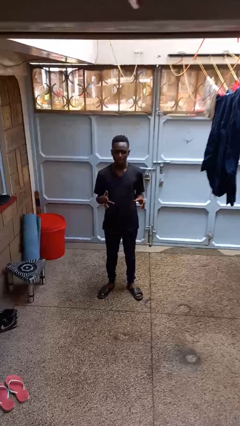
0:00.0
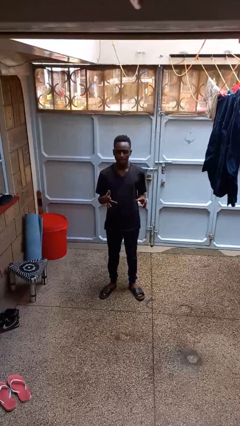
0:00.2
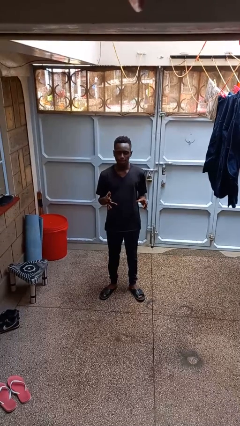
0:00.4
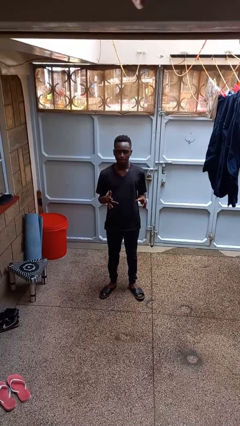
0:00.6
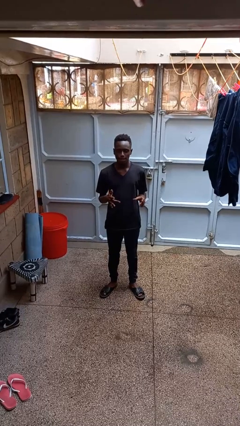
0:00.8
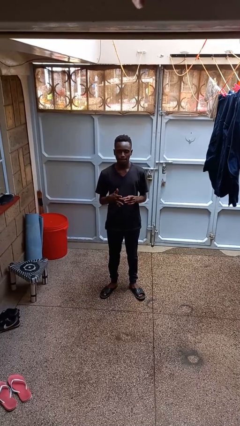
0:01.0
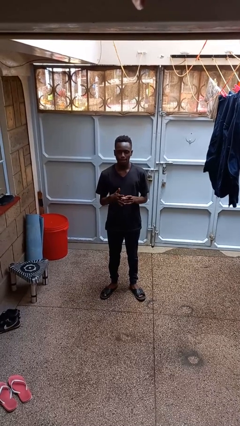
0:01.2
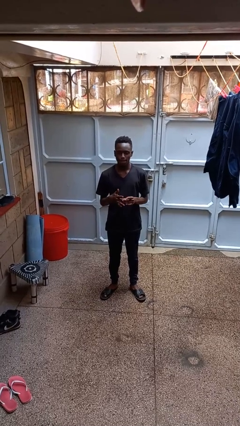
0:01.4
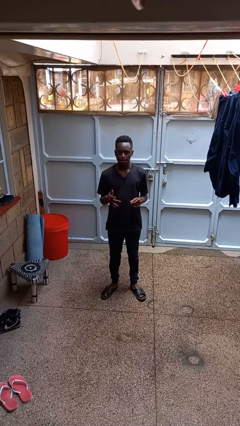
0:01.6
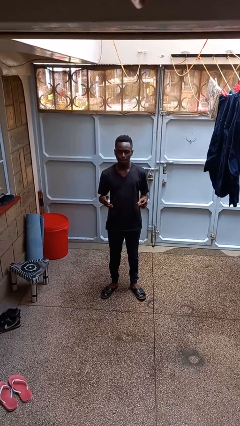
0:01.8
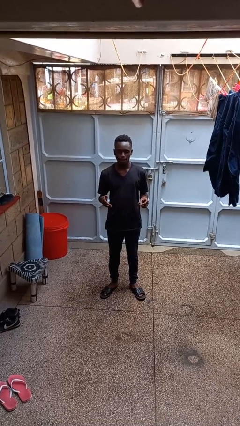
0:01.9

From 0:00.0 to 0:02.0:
person takes off ring

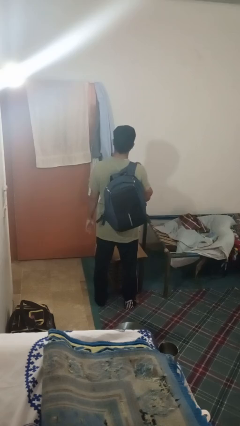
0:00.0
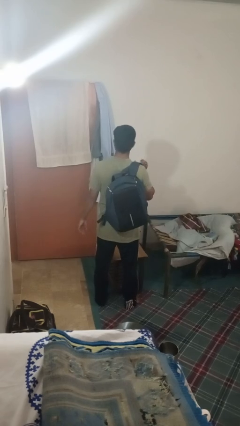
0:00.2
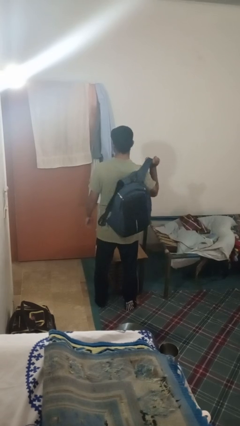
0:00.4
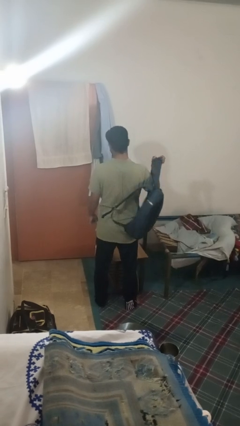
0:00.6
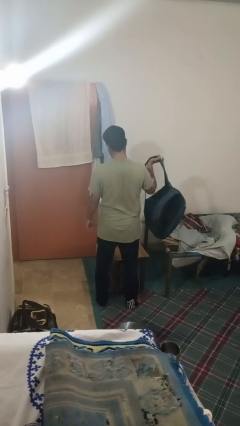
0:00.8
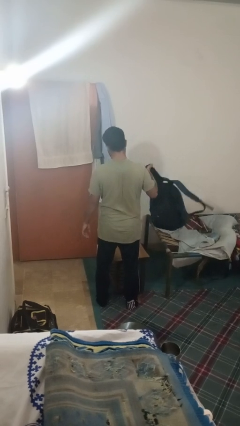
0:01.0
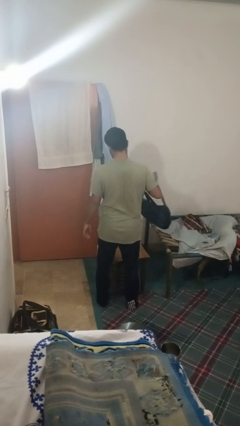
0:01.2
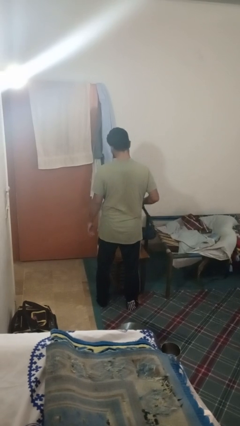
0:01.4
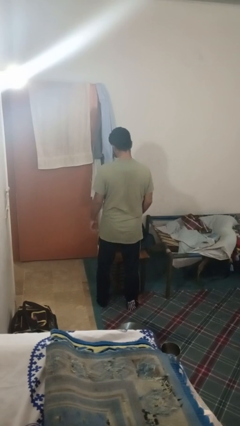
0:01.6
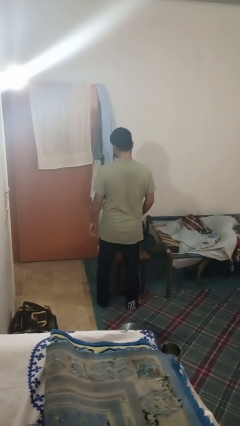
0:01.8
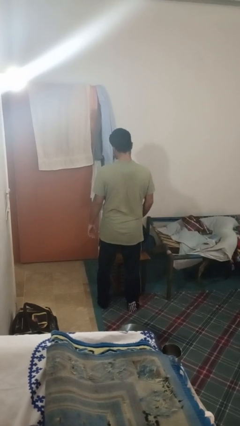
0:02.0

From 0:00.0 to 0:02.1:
person takes off backpack

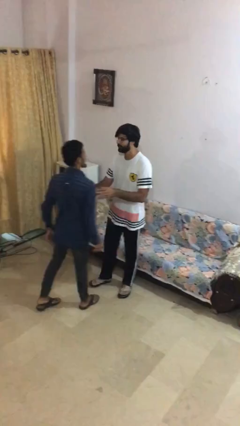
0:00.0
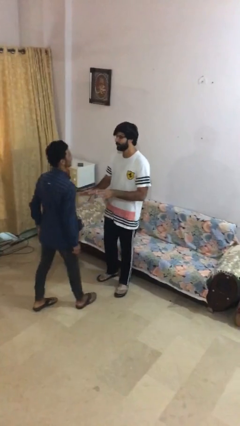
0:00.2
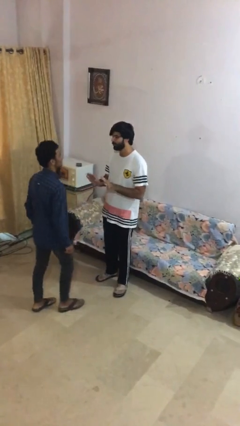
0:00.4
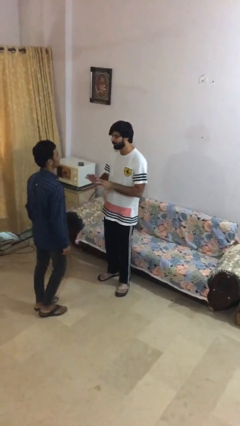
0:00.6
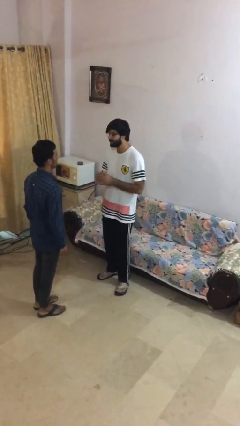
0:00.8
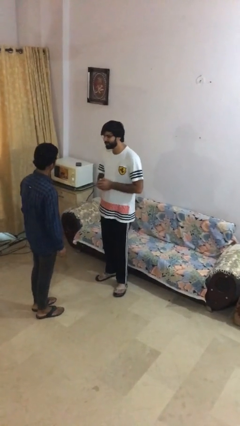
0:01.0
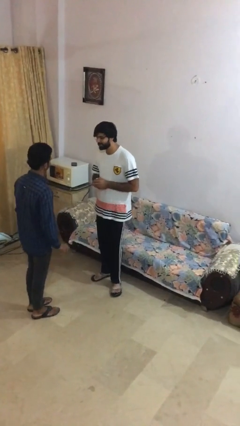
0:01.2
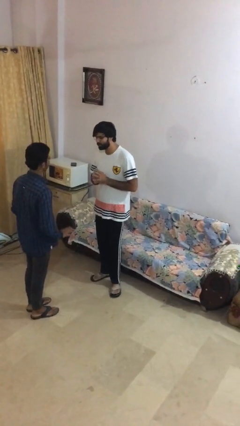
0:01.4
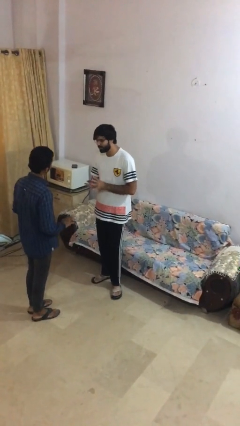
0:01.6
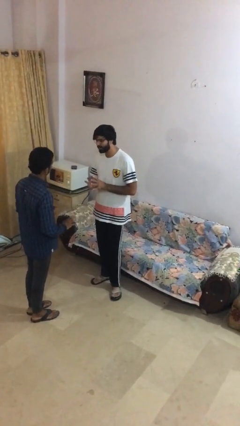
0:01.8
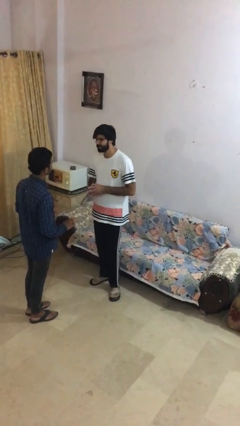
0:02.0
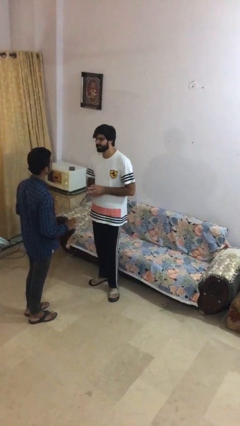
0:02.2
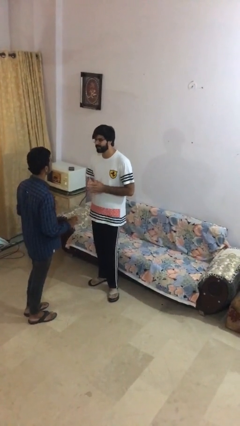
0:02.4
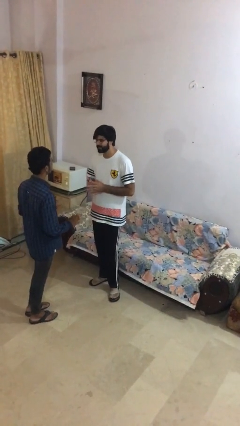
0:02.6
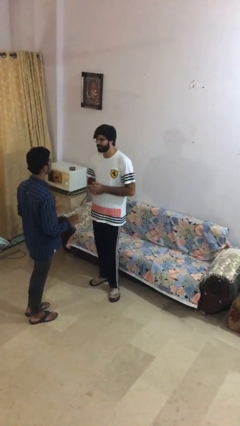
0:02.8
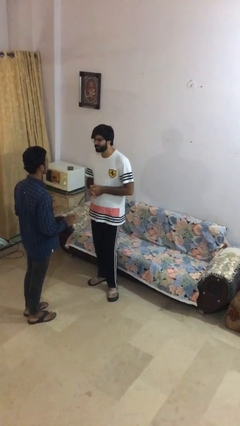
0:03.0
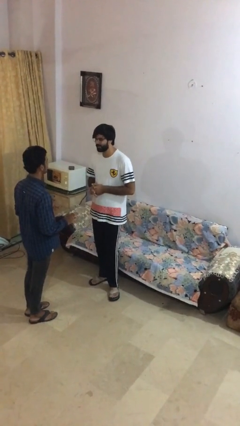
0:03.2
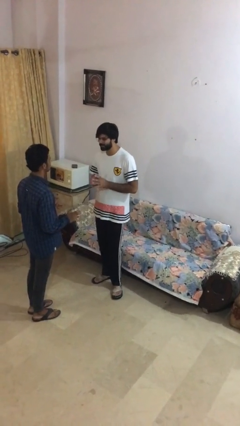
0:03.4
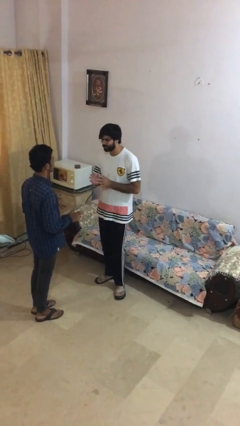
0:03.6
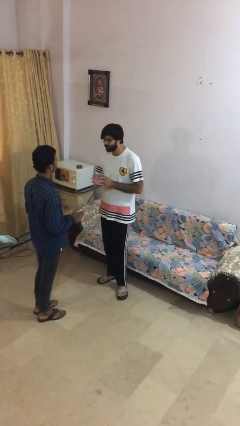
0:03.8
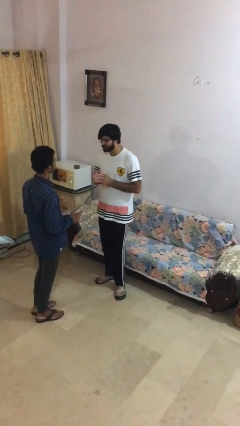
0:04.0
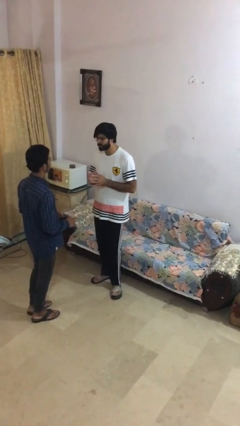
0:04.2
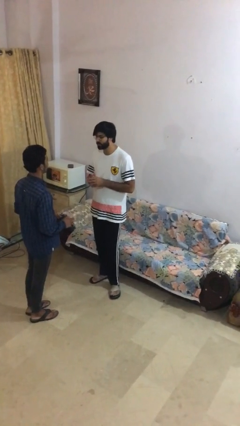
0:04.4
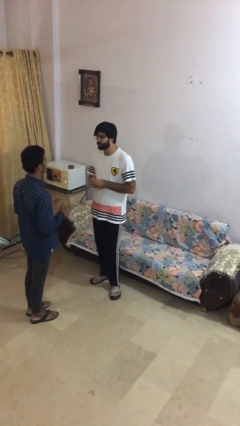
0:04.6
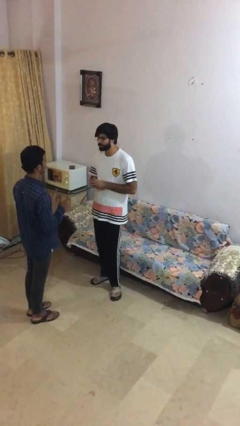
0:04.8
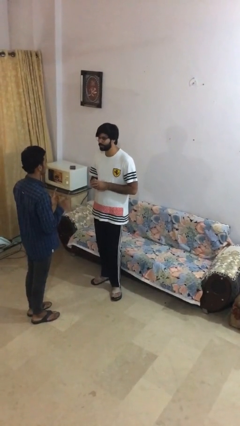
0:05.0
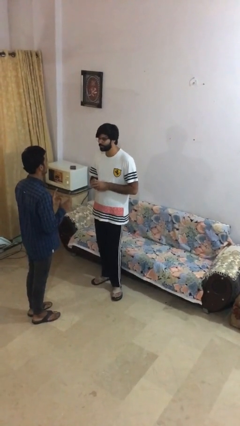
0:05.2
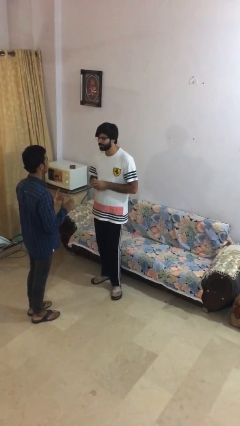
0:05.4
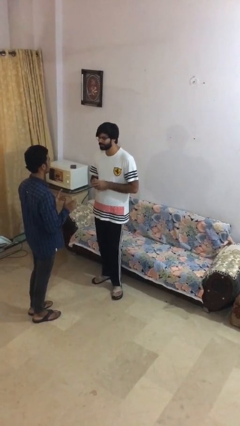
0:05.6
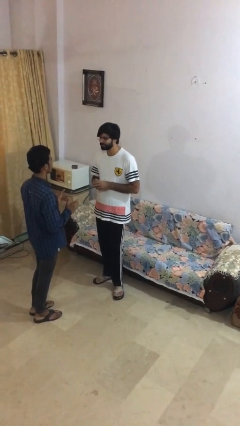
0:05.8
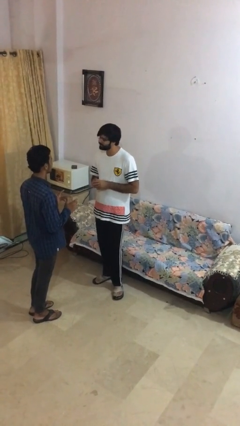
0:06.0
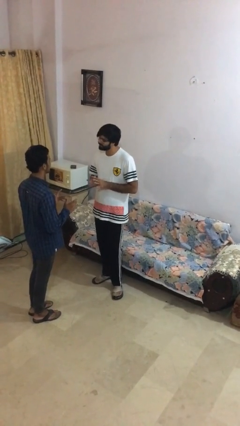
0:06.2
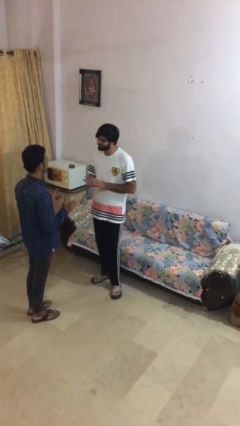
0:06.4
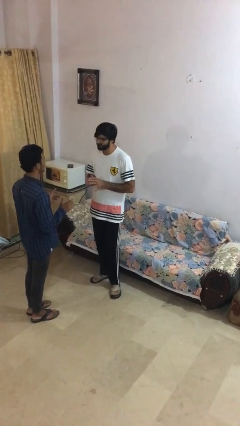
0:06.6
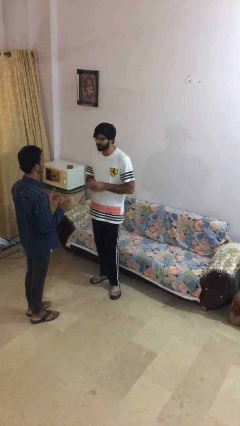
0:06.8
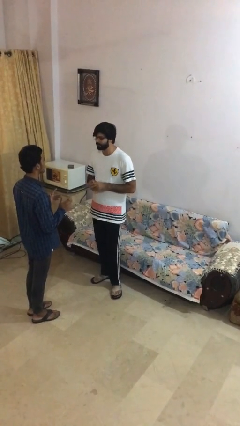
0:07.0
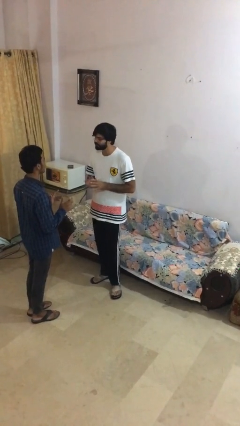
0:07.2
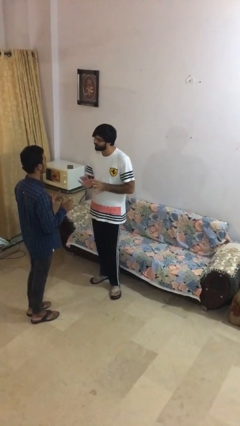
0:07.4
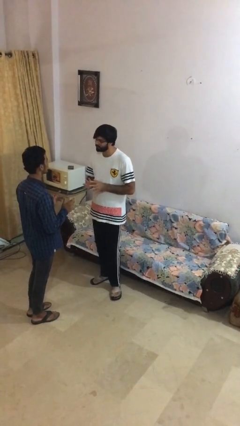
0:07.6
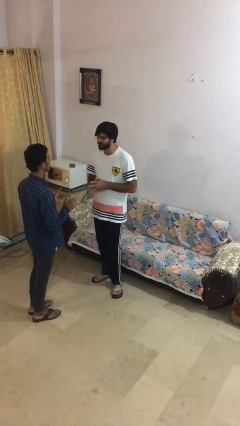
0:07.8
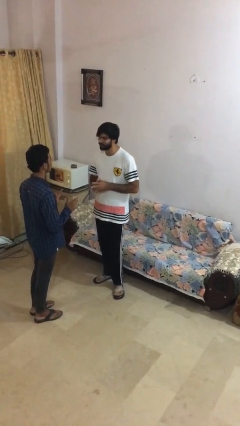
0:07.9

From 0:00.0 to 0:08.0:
person talks to person

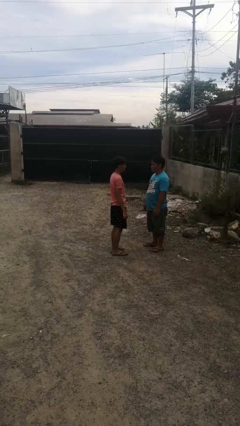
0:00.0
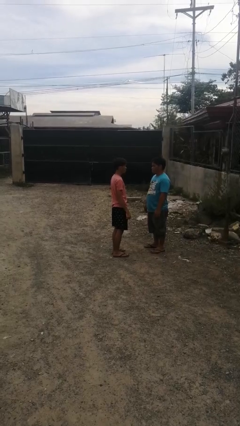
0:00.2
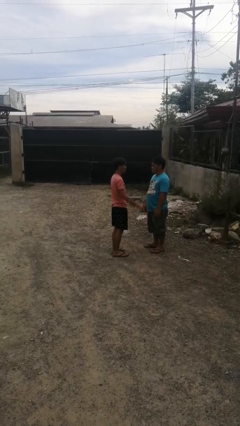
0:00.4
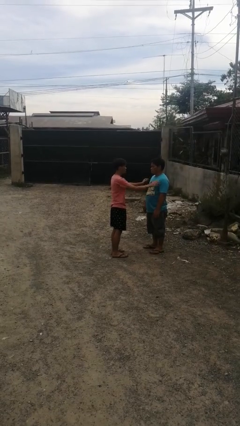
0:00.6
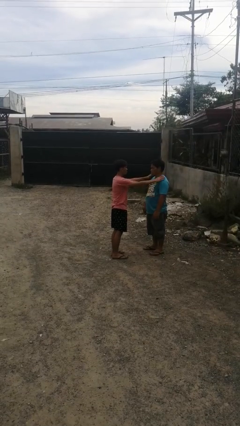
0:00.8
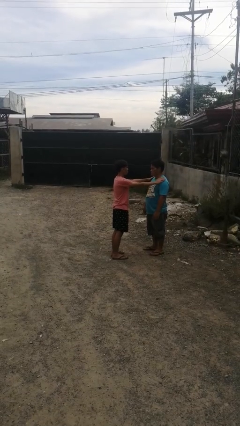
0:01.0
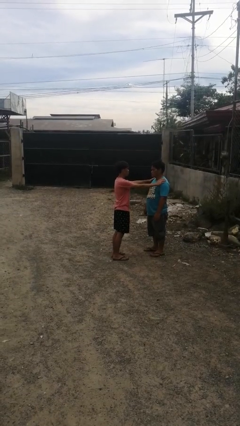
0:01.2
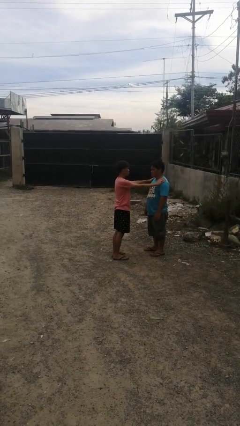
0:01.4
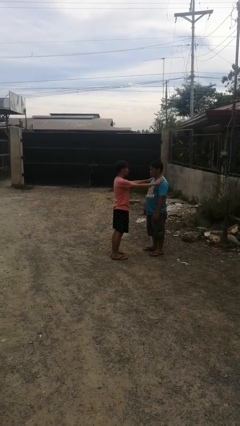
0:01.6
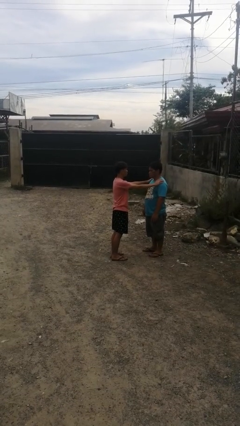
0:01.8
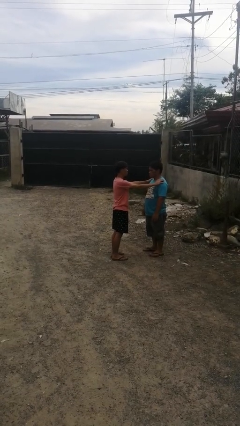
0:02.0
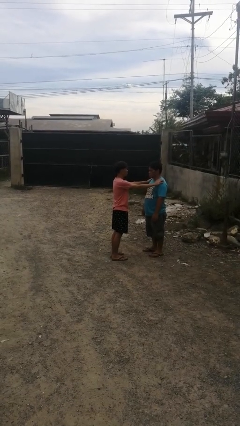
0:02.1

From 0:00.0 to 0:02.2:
person grabs person by shoulder

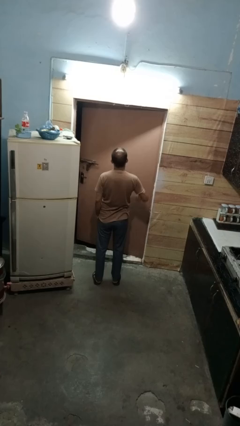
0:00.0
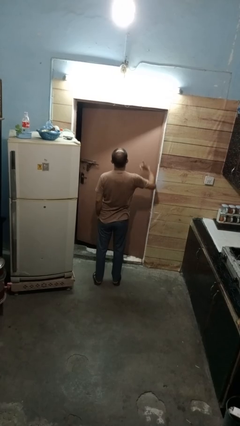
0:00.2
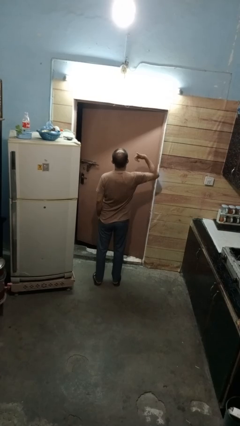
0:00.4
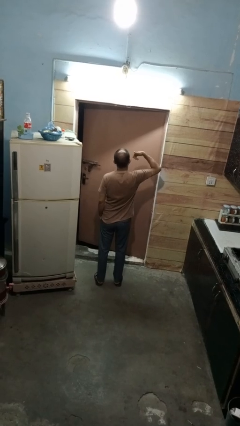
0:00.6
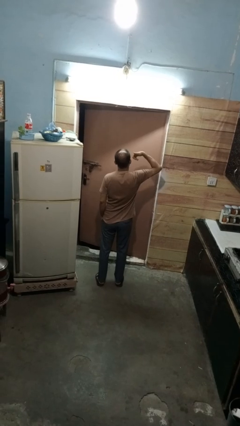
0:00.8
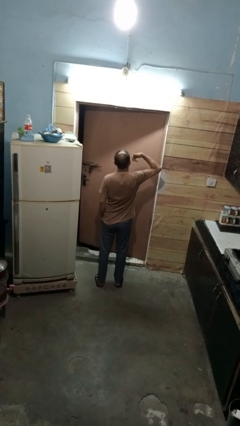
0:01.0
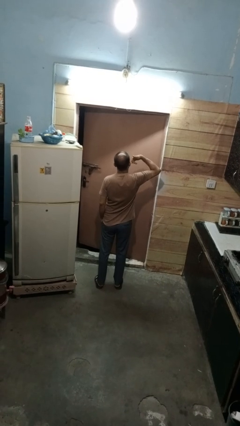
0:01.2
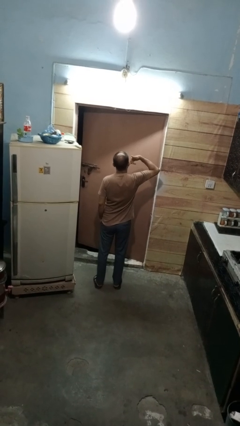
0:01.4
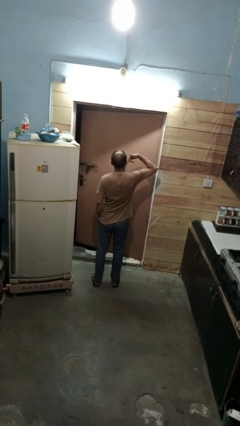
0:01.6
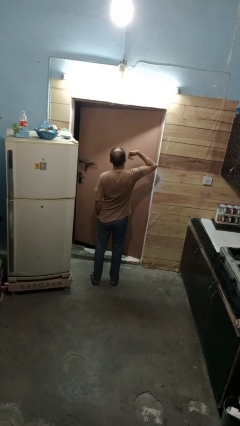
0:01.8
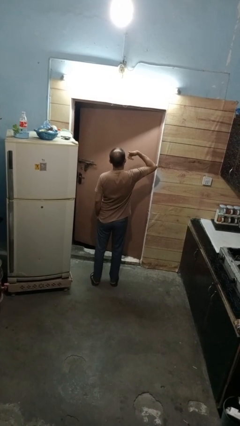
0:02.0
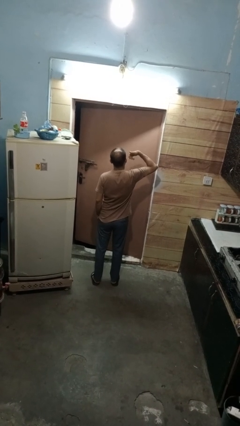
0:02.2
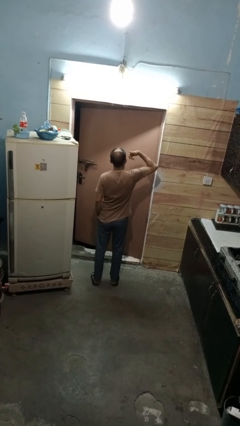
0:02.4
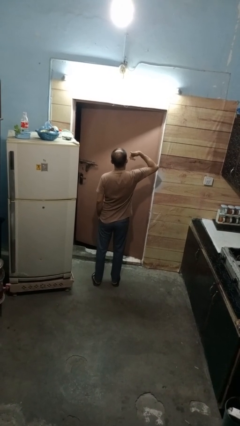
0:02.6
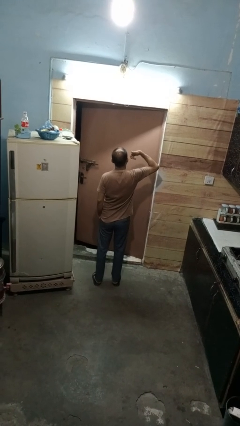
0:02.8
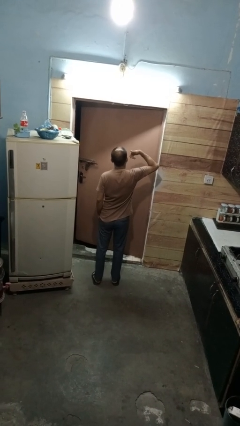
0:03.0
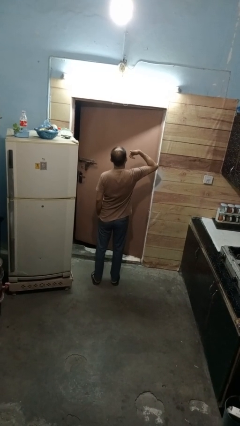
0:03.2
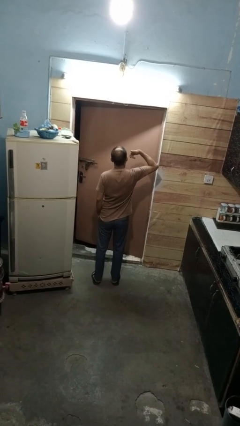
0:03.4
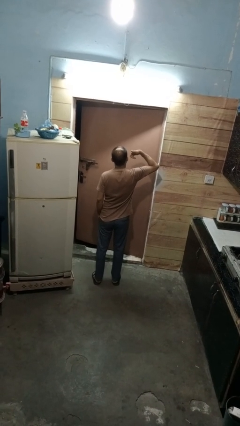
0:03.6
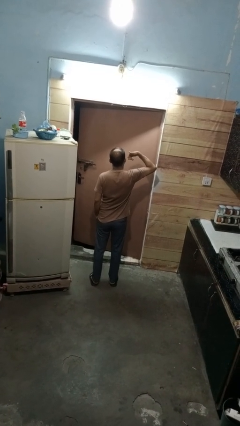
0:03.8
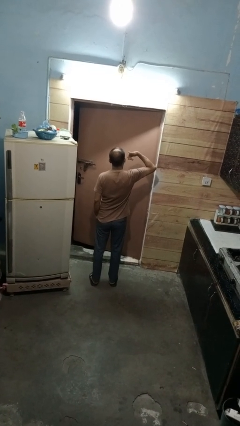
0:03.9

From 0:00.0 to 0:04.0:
person gestures call me
